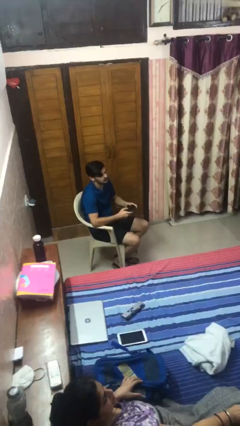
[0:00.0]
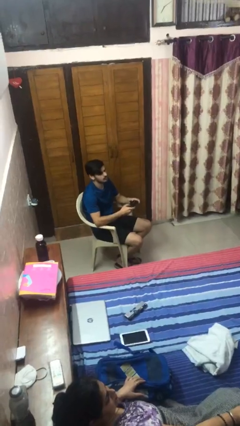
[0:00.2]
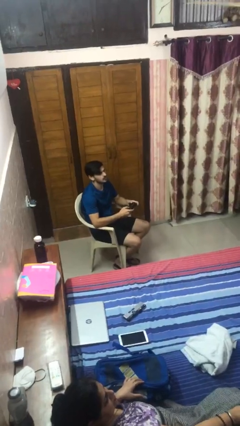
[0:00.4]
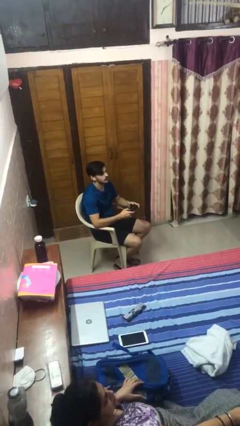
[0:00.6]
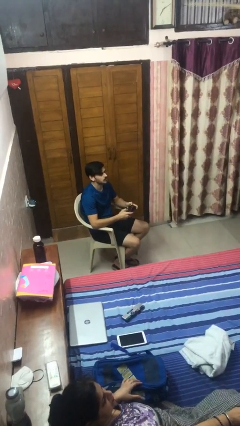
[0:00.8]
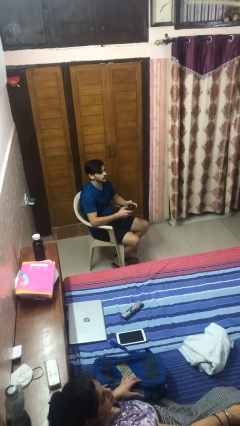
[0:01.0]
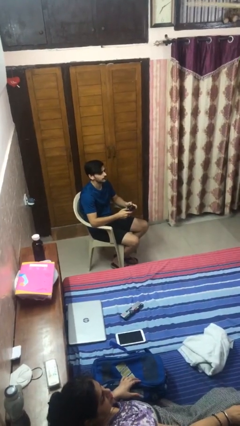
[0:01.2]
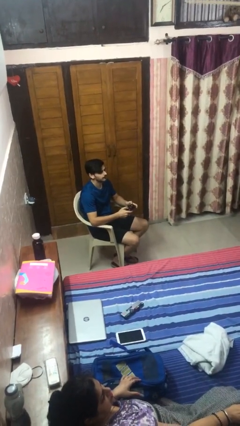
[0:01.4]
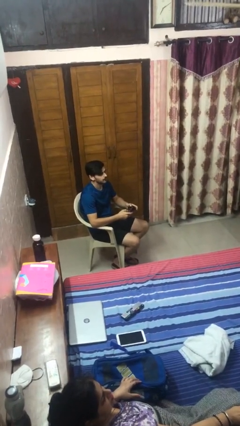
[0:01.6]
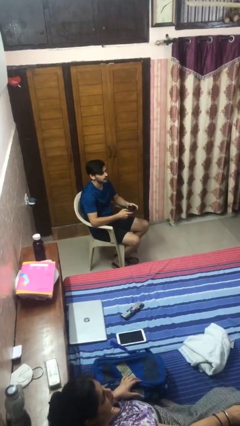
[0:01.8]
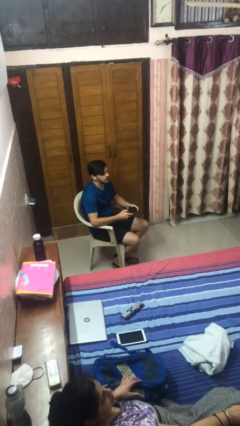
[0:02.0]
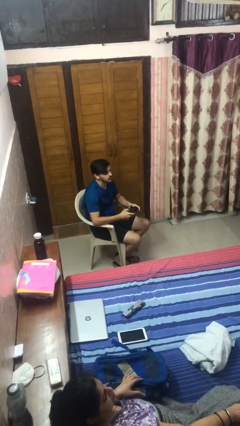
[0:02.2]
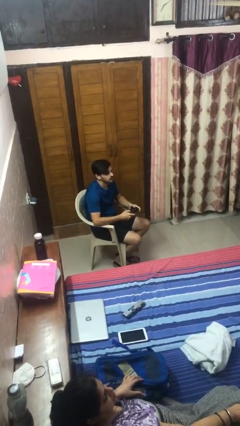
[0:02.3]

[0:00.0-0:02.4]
person interacts with handheld game

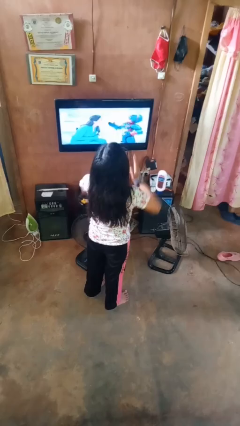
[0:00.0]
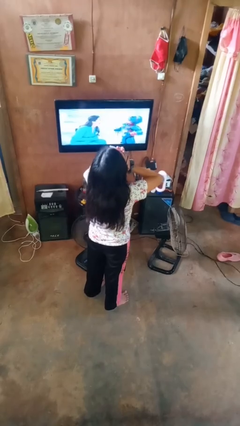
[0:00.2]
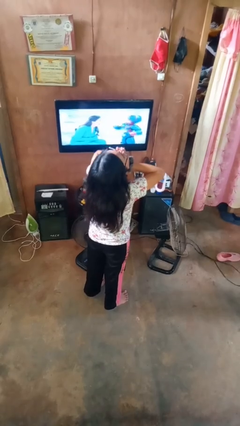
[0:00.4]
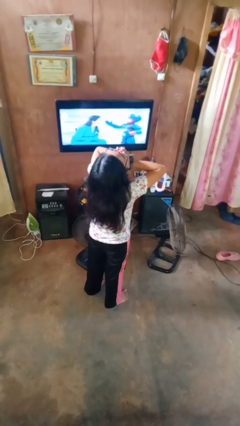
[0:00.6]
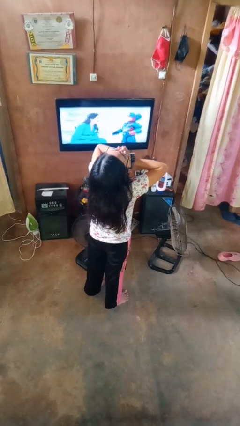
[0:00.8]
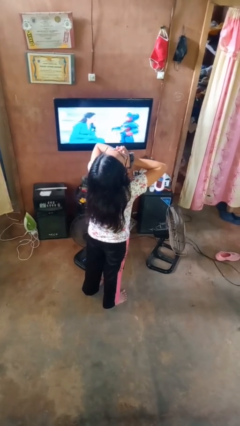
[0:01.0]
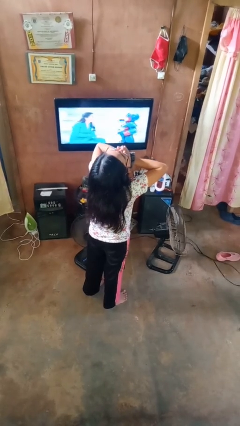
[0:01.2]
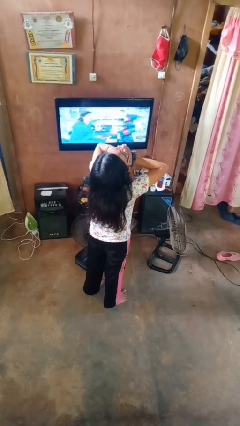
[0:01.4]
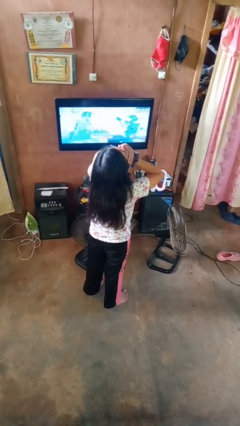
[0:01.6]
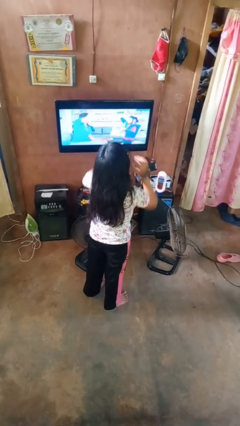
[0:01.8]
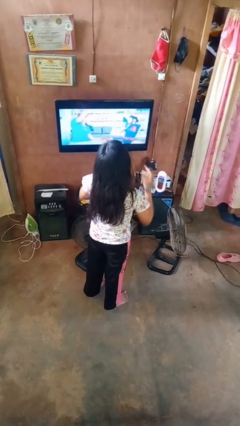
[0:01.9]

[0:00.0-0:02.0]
person yawns

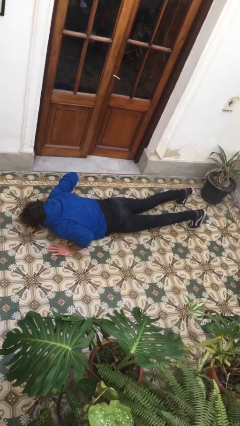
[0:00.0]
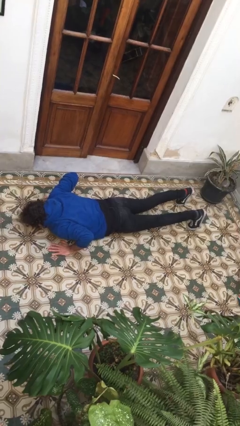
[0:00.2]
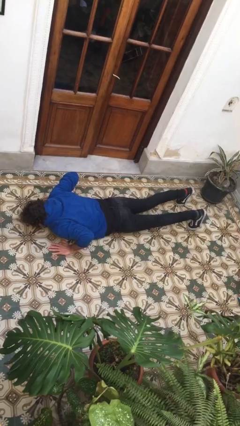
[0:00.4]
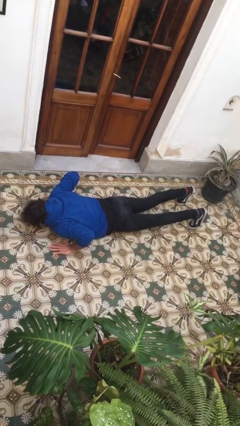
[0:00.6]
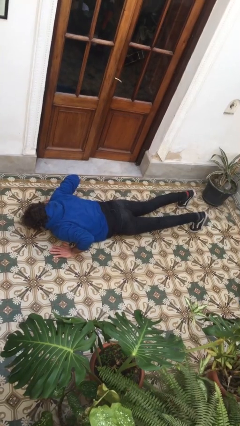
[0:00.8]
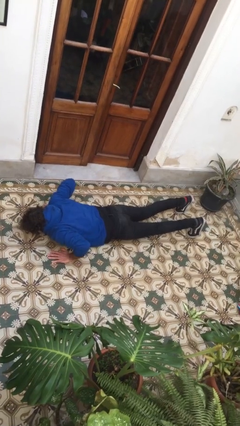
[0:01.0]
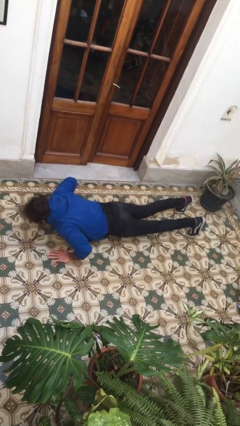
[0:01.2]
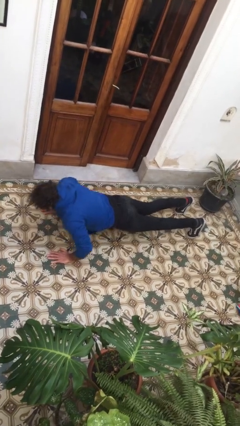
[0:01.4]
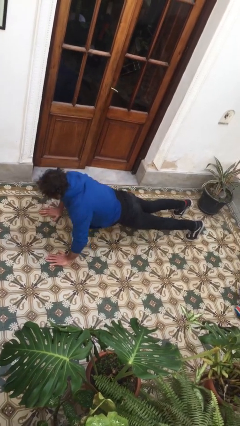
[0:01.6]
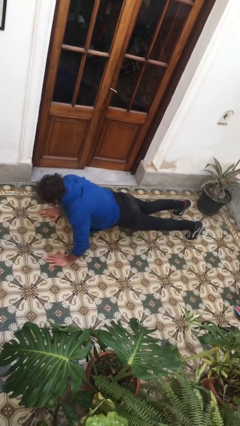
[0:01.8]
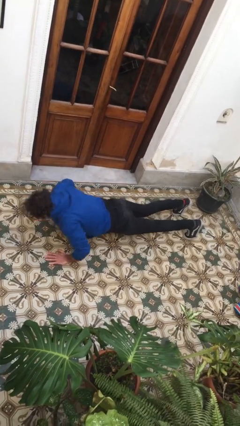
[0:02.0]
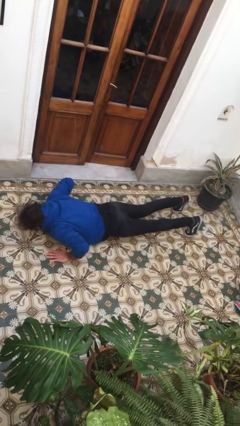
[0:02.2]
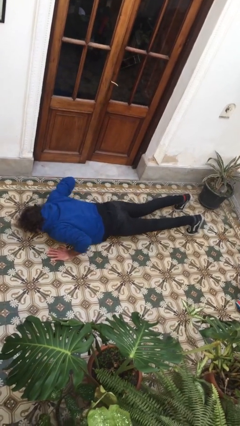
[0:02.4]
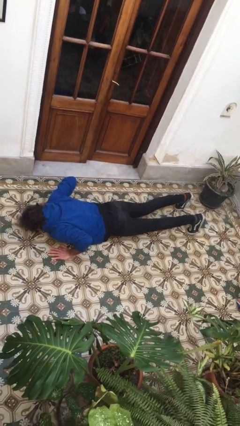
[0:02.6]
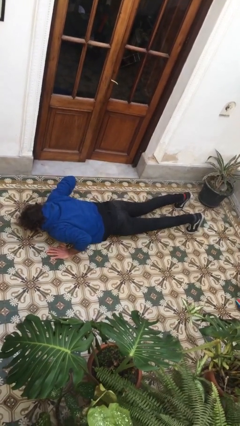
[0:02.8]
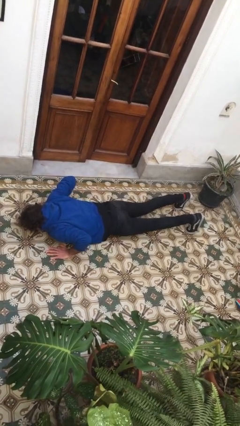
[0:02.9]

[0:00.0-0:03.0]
person exercises with pushup

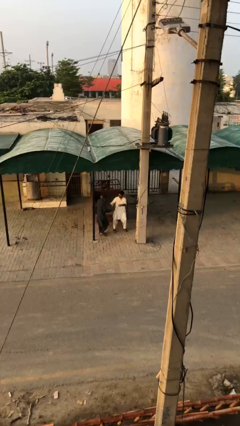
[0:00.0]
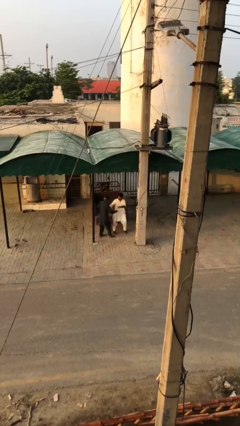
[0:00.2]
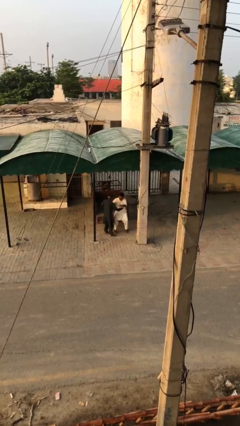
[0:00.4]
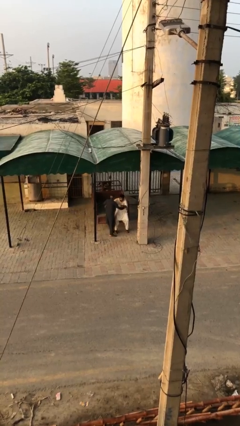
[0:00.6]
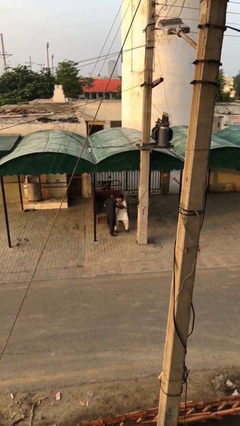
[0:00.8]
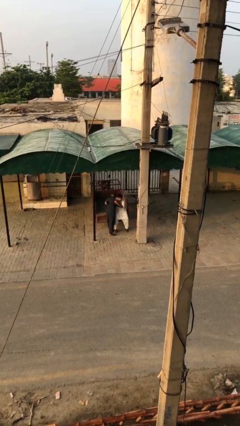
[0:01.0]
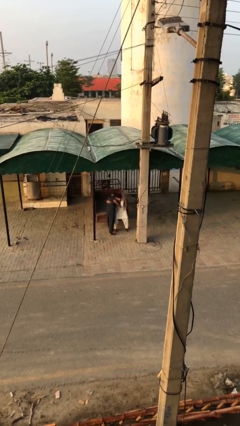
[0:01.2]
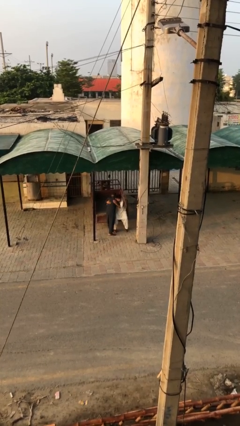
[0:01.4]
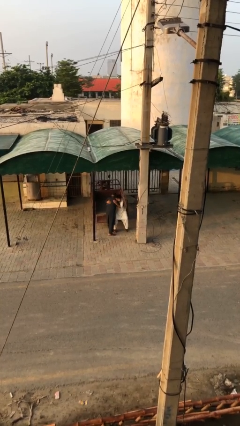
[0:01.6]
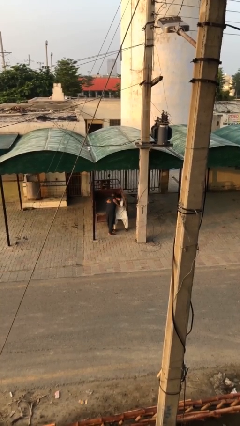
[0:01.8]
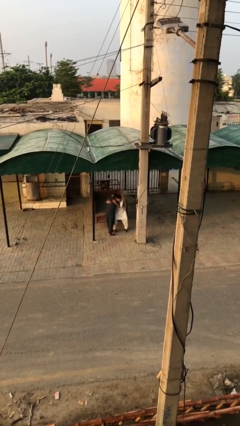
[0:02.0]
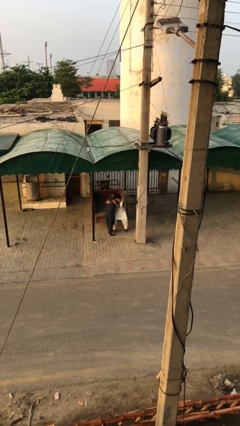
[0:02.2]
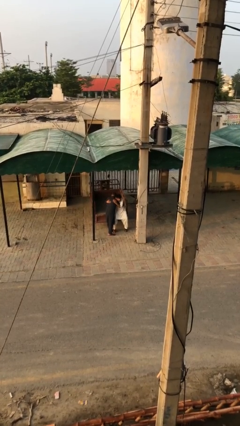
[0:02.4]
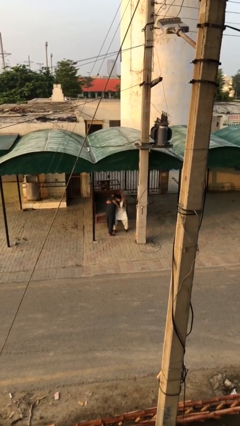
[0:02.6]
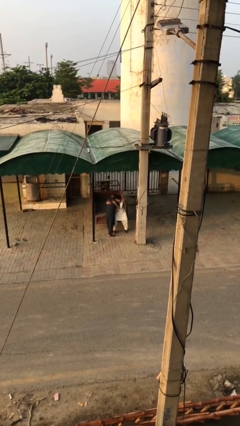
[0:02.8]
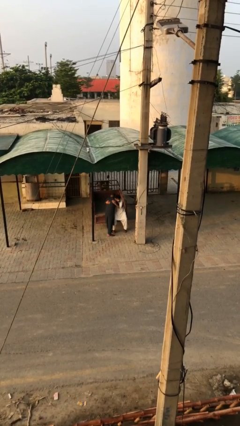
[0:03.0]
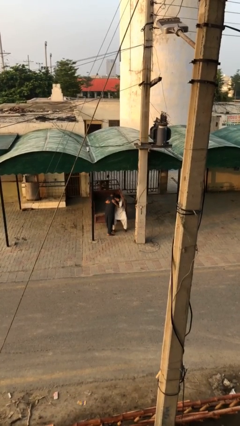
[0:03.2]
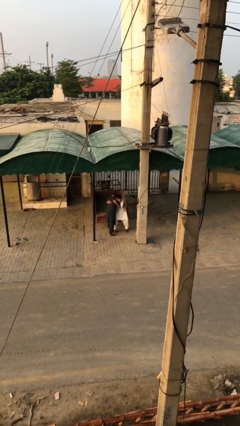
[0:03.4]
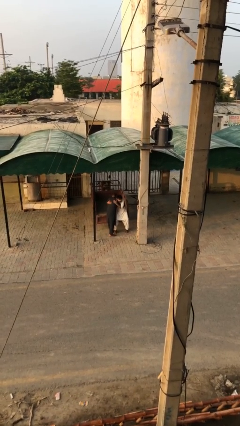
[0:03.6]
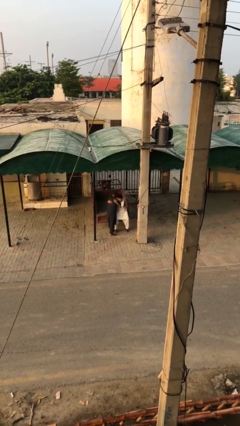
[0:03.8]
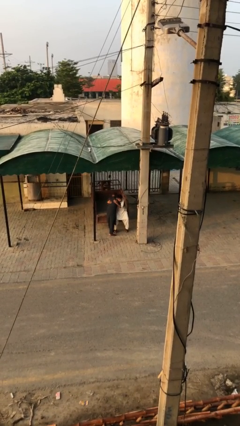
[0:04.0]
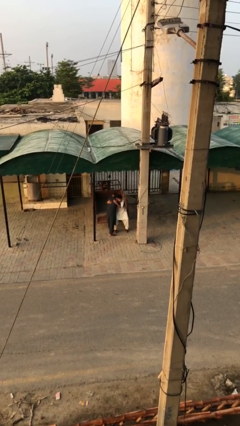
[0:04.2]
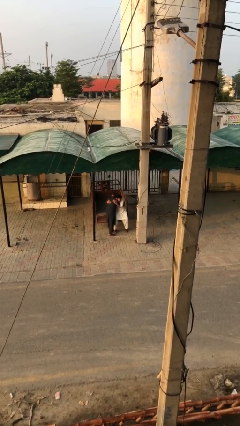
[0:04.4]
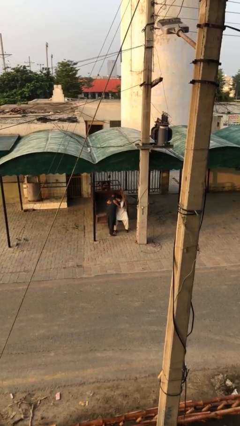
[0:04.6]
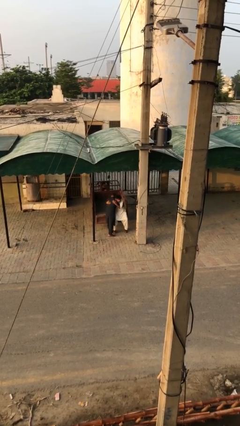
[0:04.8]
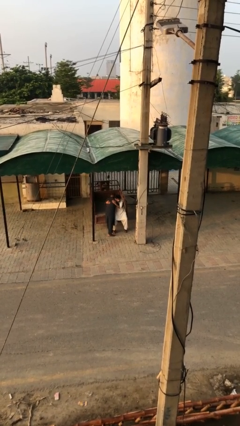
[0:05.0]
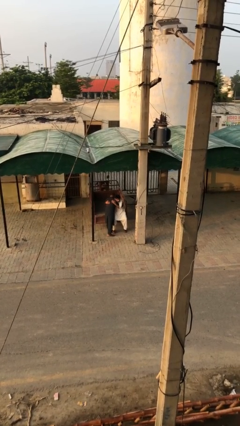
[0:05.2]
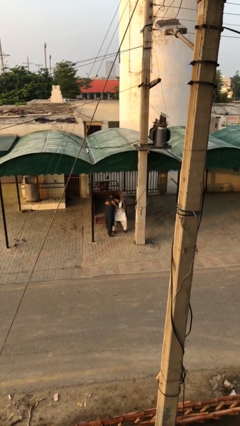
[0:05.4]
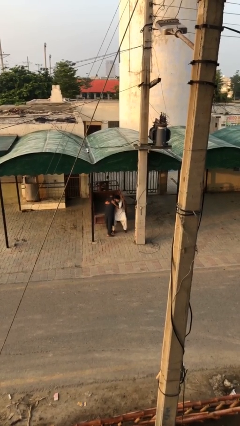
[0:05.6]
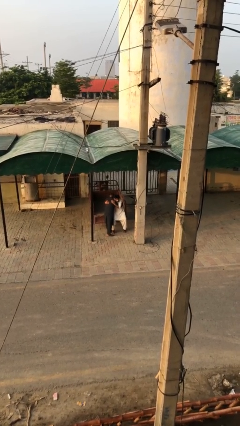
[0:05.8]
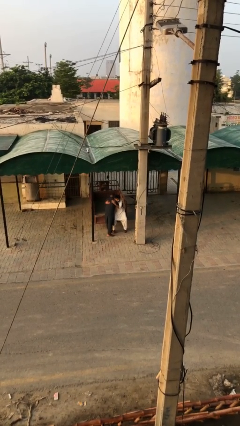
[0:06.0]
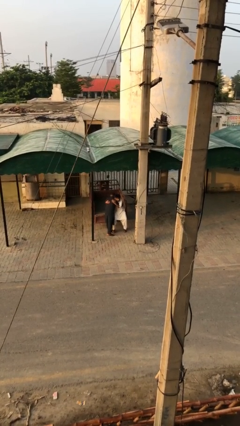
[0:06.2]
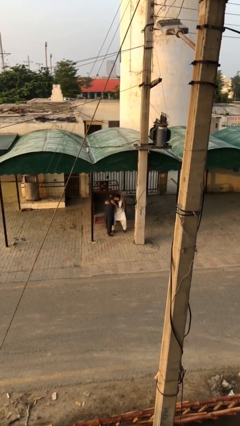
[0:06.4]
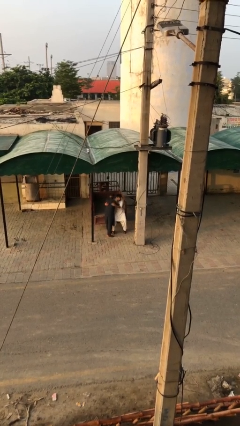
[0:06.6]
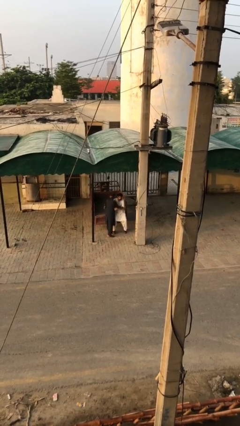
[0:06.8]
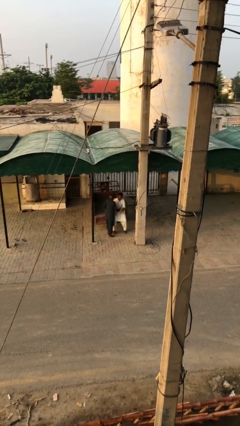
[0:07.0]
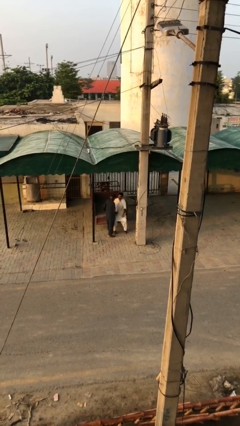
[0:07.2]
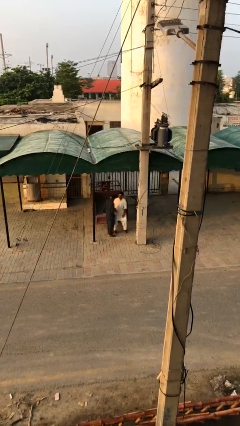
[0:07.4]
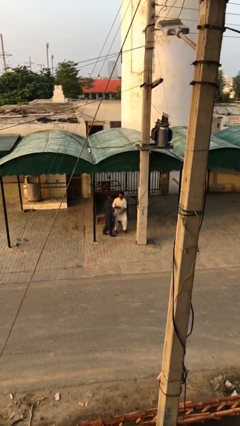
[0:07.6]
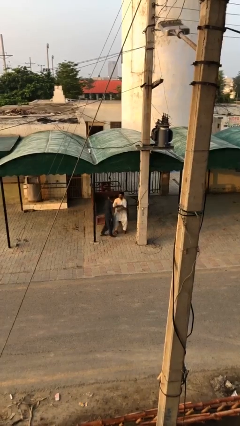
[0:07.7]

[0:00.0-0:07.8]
person embraces person

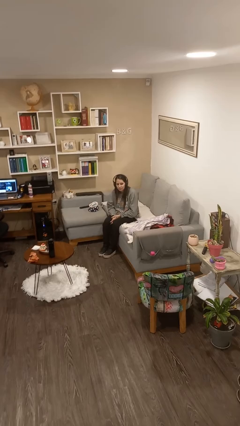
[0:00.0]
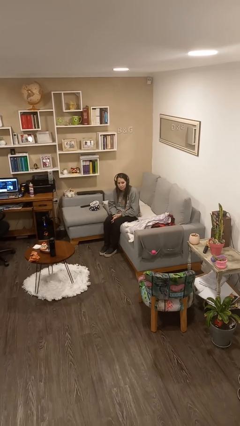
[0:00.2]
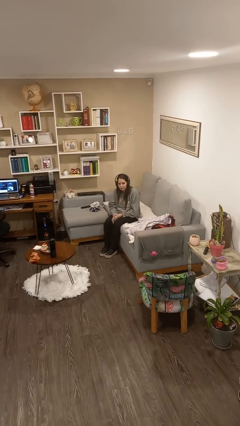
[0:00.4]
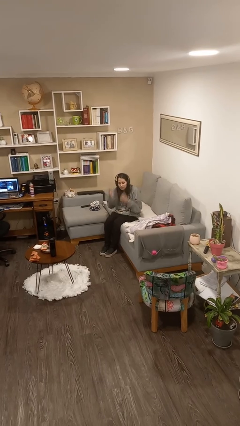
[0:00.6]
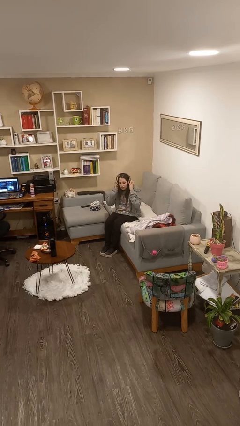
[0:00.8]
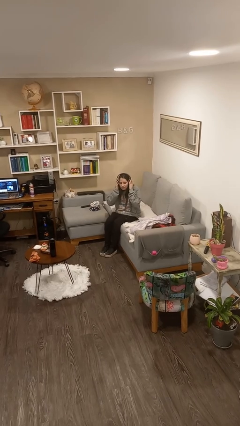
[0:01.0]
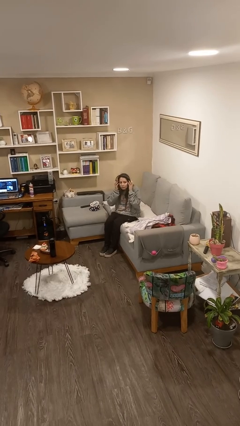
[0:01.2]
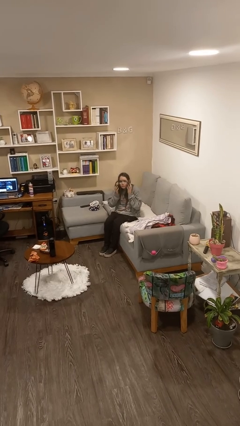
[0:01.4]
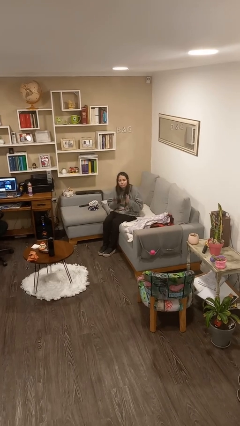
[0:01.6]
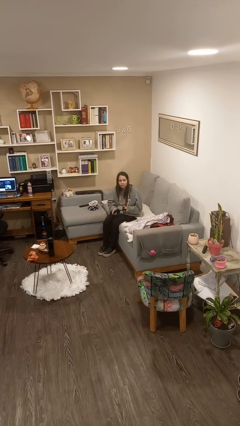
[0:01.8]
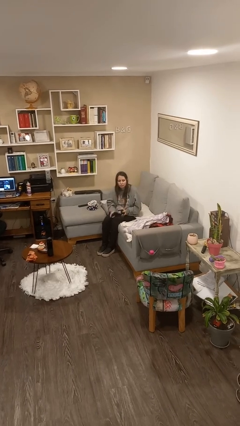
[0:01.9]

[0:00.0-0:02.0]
person takes off headphones

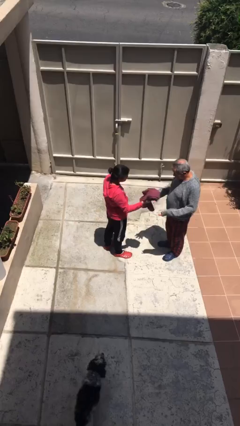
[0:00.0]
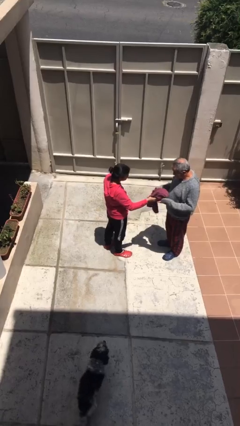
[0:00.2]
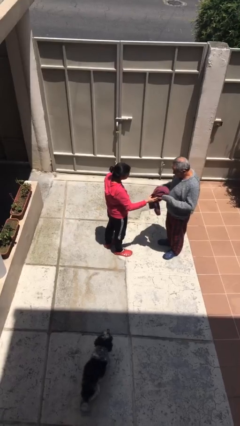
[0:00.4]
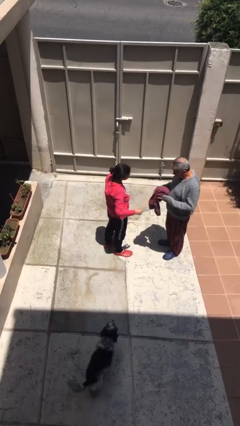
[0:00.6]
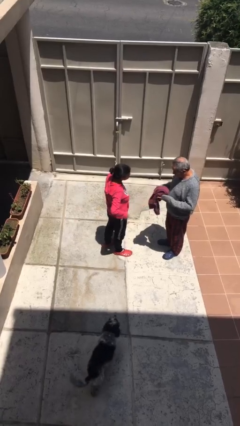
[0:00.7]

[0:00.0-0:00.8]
person transfers object to person
